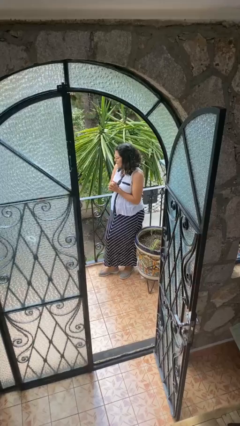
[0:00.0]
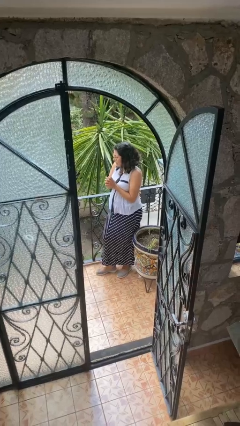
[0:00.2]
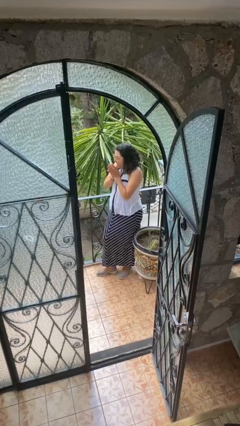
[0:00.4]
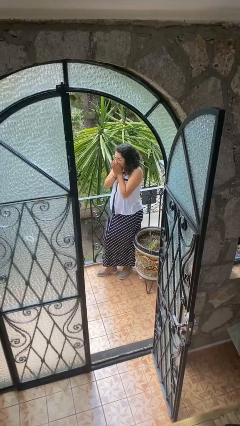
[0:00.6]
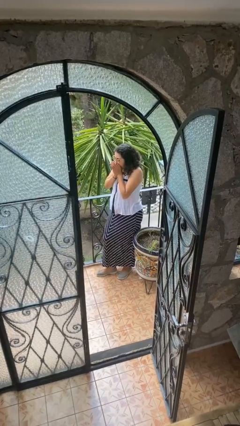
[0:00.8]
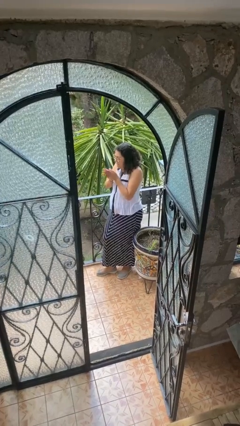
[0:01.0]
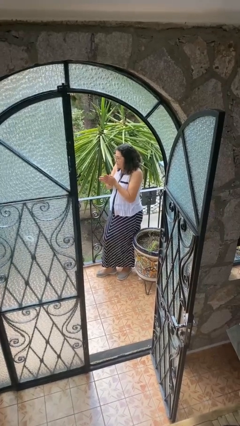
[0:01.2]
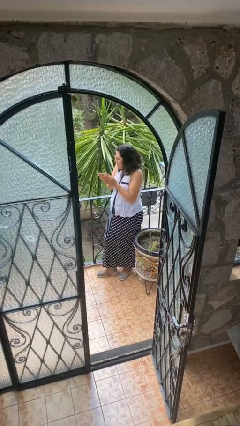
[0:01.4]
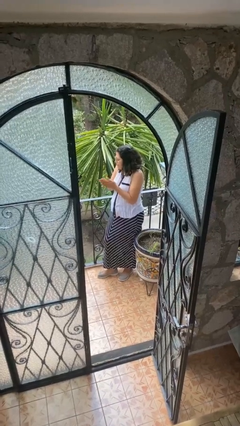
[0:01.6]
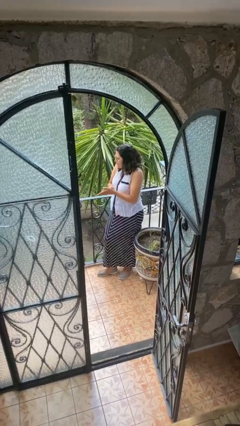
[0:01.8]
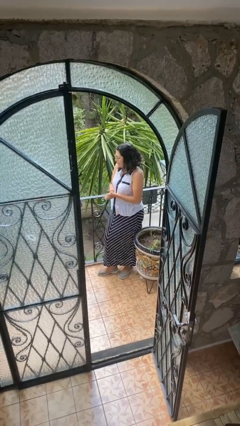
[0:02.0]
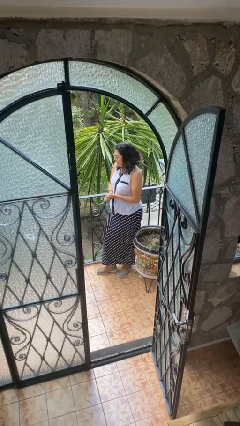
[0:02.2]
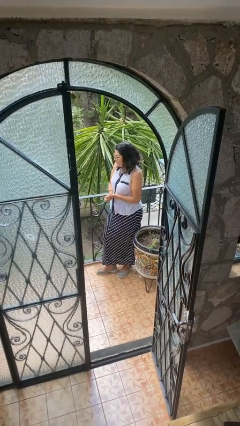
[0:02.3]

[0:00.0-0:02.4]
person blows into hands

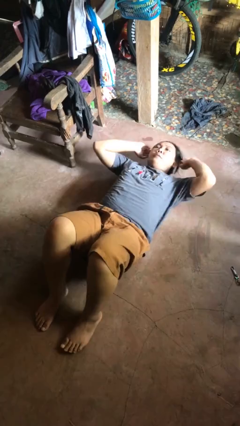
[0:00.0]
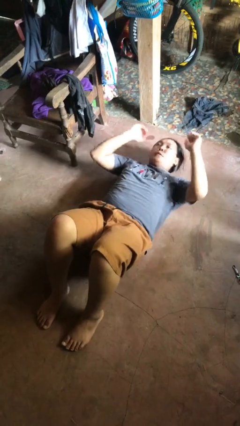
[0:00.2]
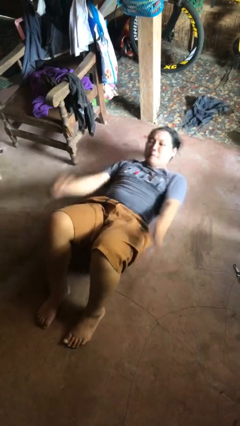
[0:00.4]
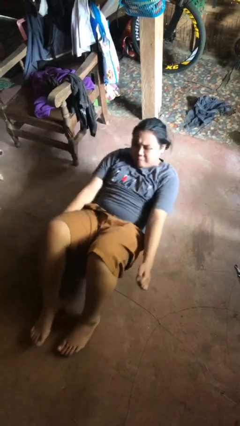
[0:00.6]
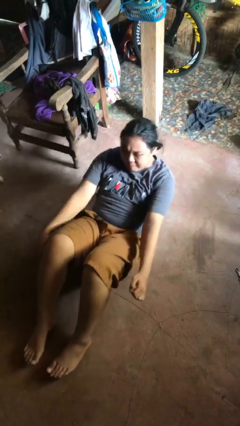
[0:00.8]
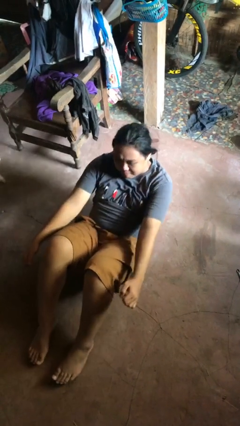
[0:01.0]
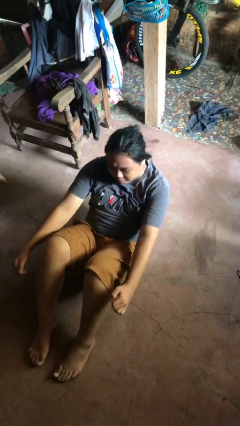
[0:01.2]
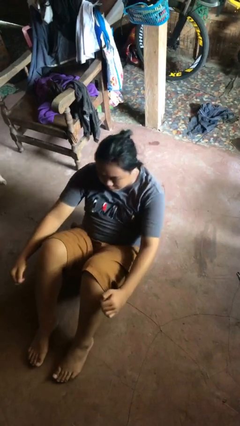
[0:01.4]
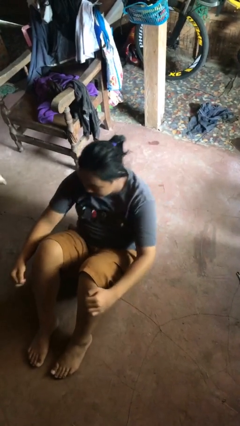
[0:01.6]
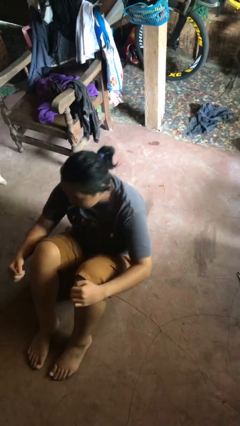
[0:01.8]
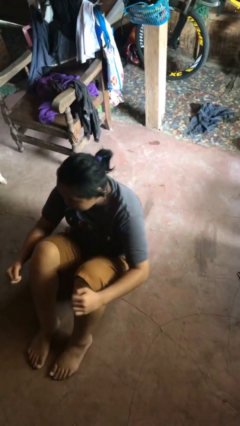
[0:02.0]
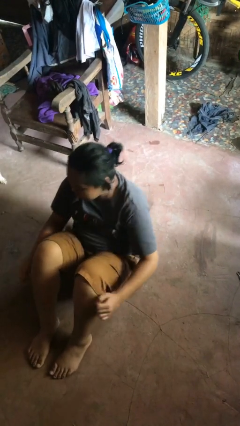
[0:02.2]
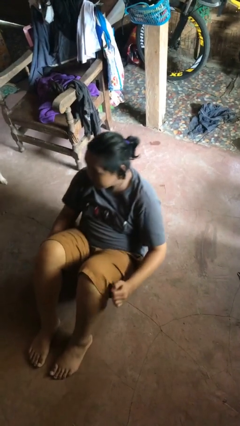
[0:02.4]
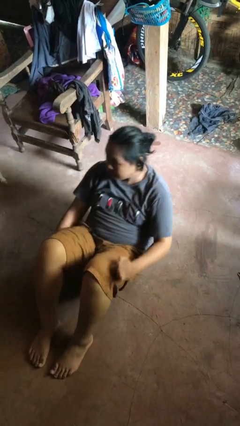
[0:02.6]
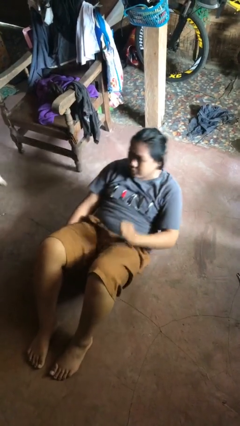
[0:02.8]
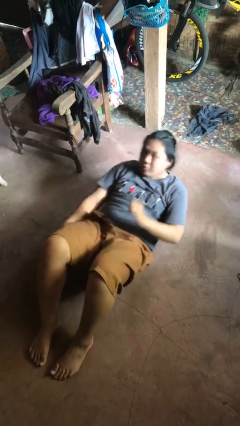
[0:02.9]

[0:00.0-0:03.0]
person exercises with situp

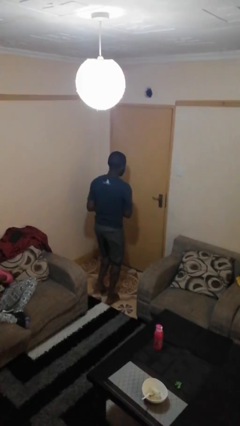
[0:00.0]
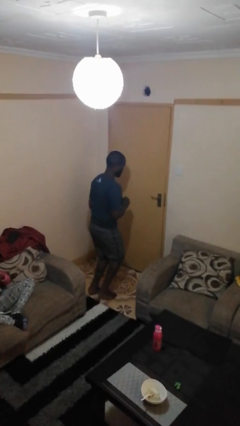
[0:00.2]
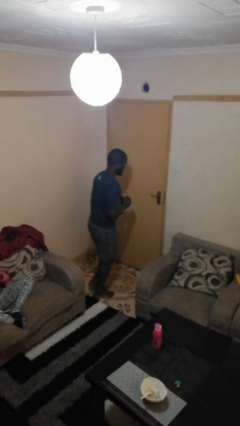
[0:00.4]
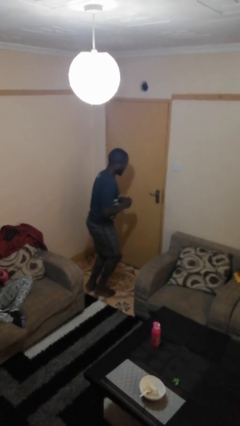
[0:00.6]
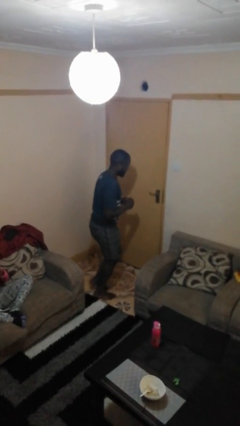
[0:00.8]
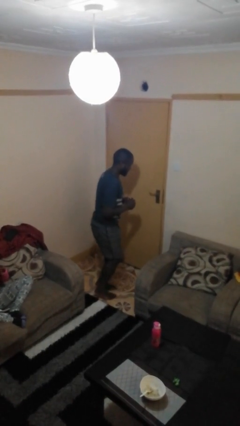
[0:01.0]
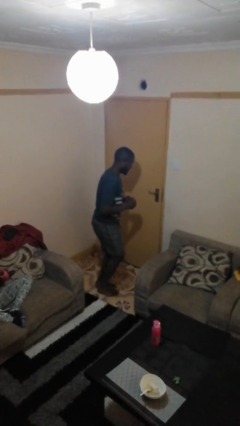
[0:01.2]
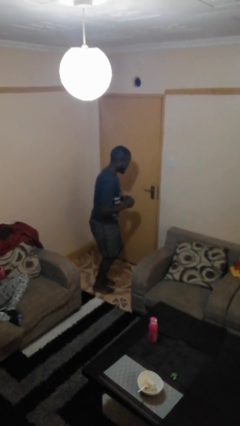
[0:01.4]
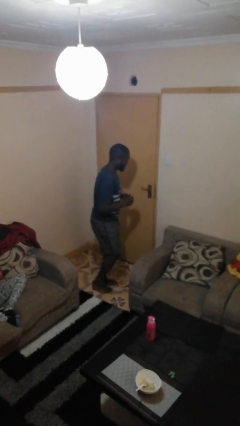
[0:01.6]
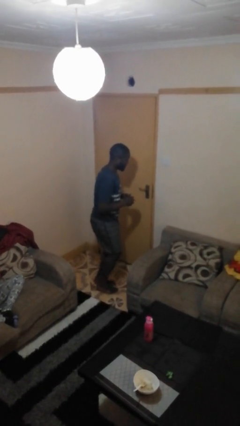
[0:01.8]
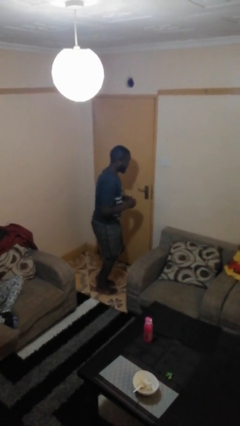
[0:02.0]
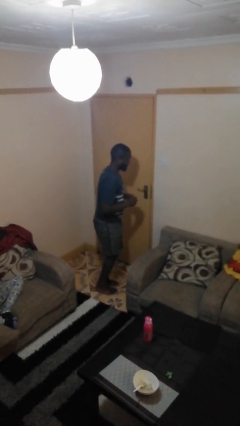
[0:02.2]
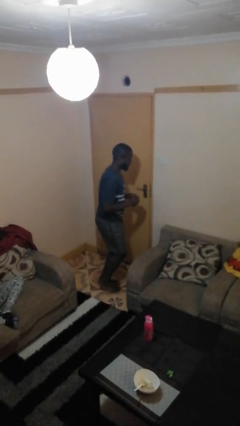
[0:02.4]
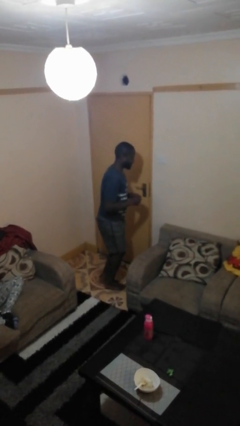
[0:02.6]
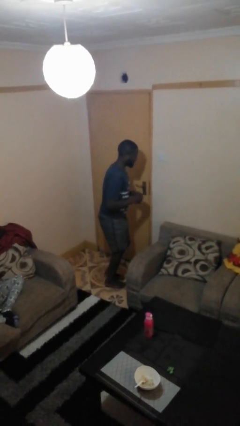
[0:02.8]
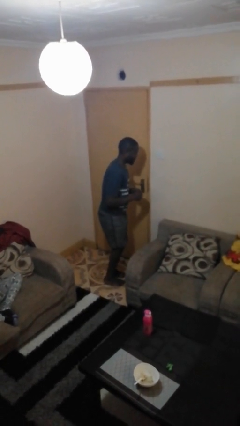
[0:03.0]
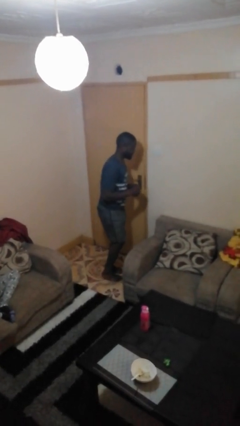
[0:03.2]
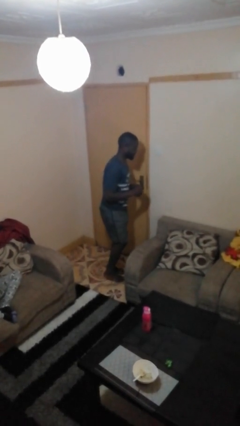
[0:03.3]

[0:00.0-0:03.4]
person walks tiptoe

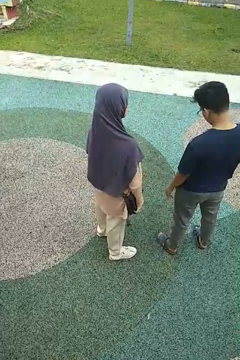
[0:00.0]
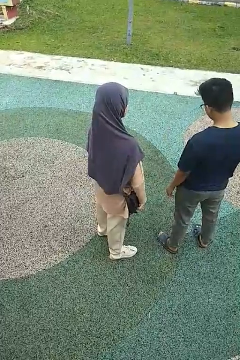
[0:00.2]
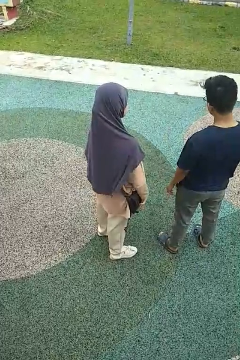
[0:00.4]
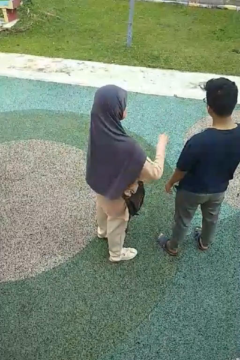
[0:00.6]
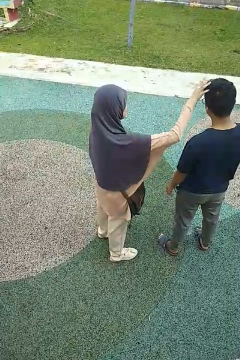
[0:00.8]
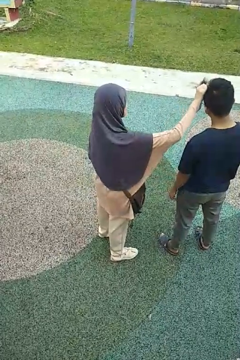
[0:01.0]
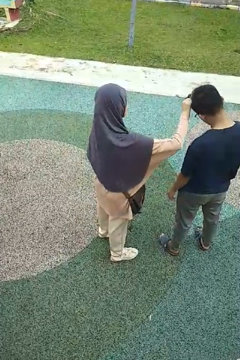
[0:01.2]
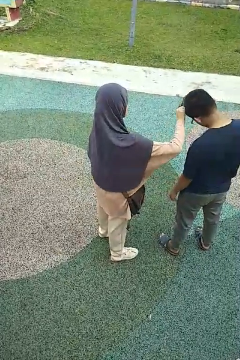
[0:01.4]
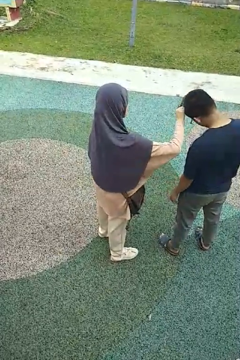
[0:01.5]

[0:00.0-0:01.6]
person grabs person by hair

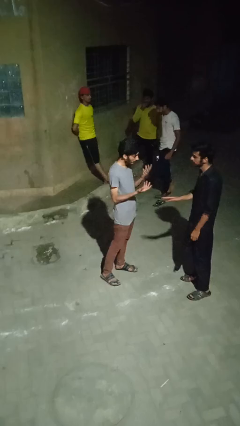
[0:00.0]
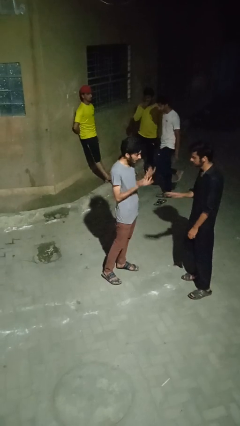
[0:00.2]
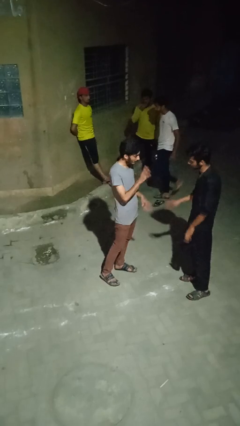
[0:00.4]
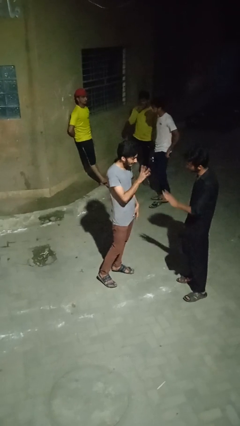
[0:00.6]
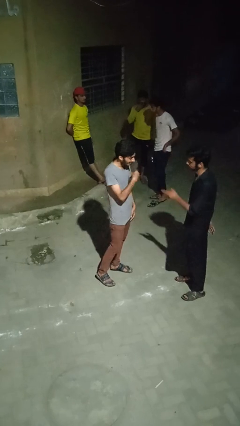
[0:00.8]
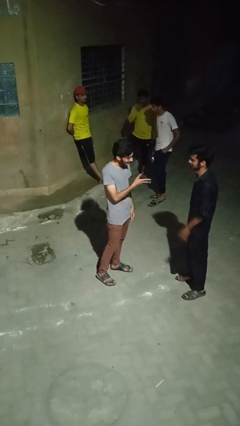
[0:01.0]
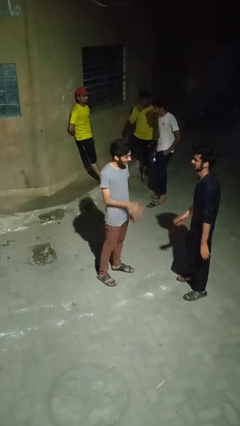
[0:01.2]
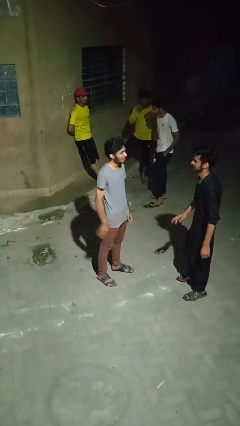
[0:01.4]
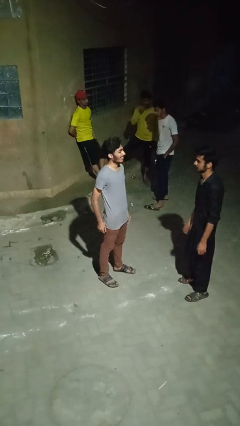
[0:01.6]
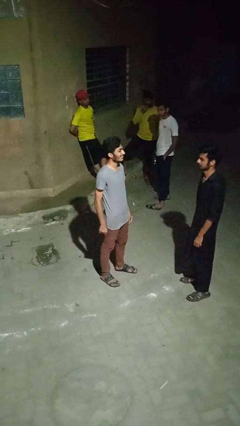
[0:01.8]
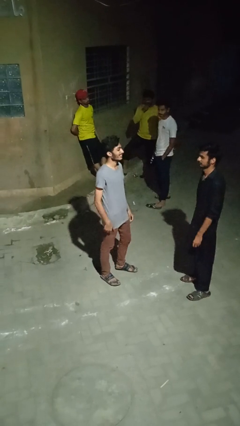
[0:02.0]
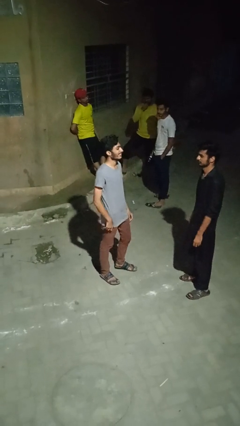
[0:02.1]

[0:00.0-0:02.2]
person talks to person

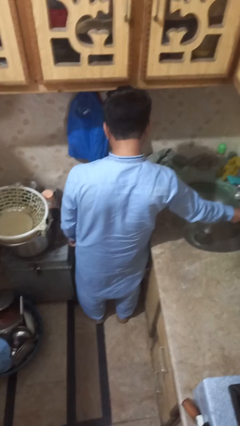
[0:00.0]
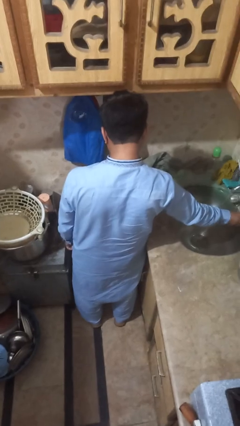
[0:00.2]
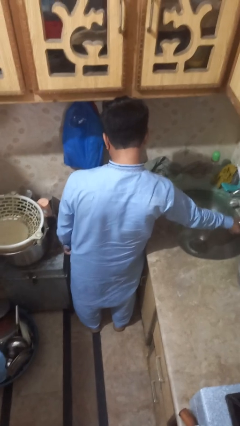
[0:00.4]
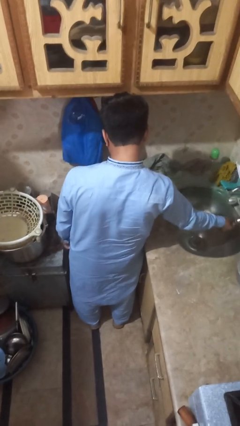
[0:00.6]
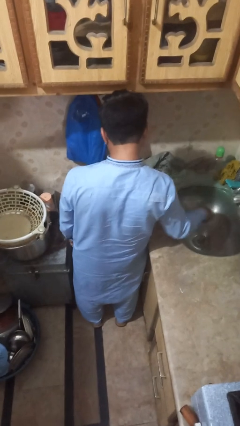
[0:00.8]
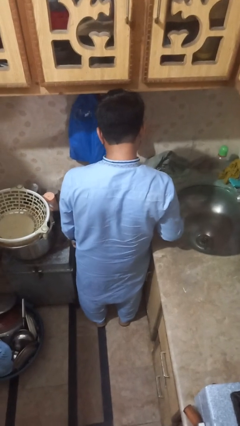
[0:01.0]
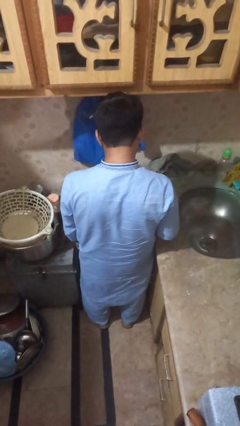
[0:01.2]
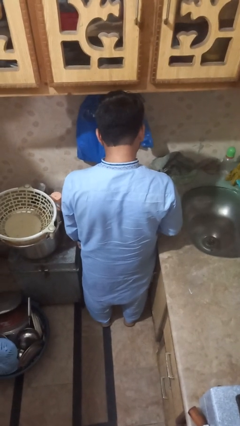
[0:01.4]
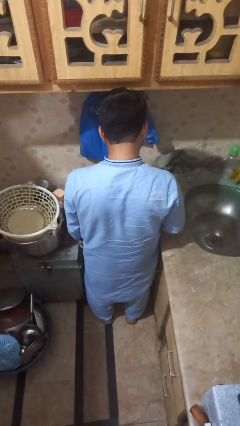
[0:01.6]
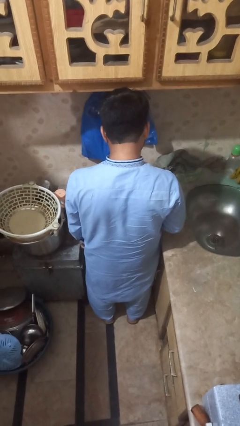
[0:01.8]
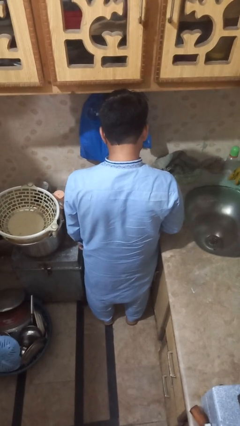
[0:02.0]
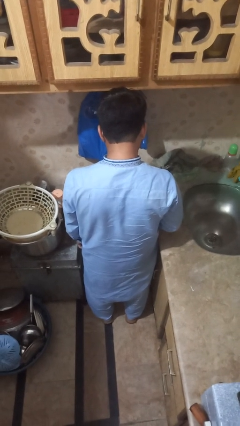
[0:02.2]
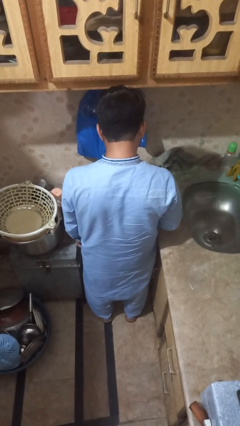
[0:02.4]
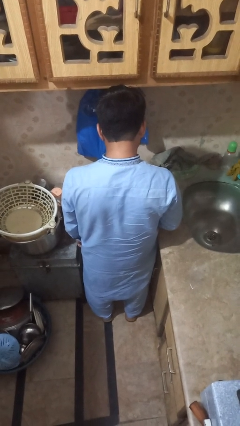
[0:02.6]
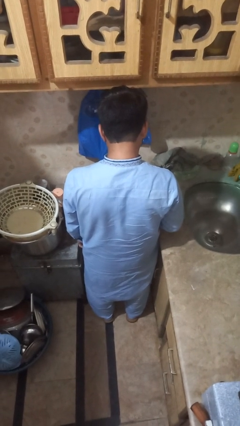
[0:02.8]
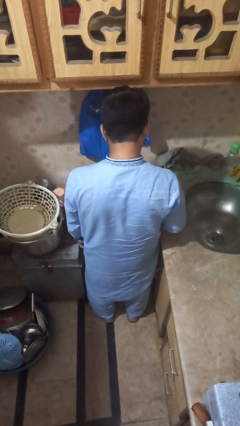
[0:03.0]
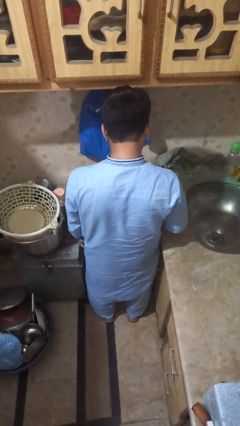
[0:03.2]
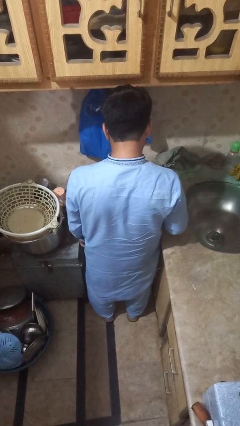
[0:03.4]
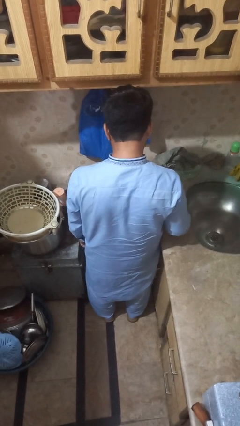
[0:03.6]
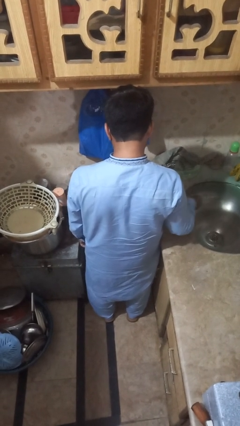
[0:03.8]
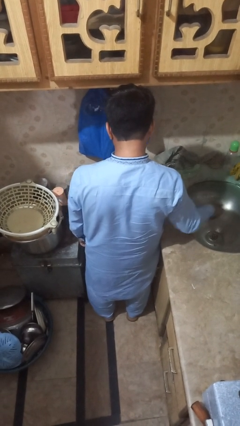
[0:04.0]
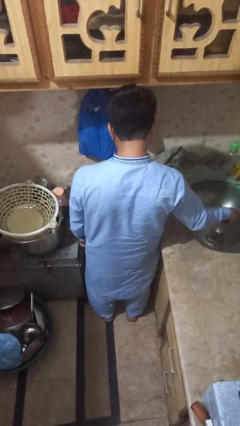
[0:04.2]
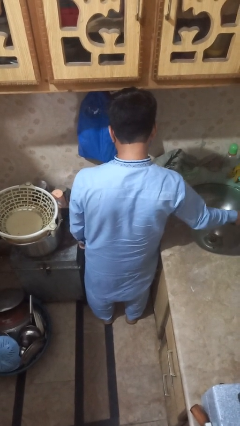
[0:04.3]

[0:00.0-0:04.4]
person turns off faucet
